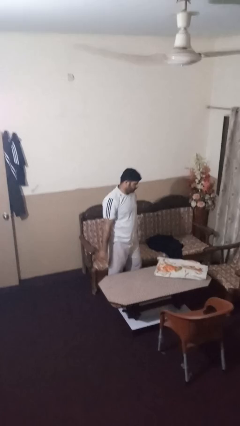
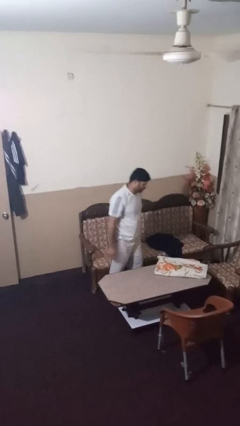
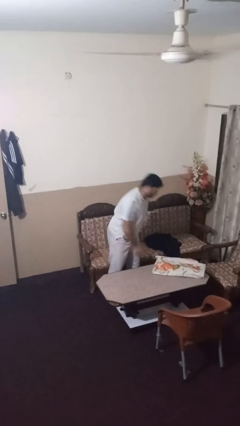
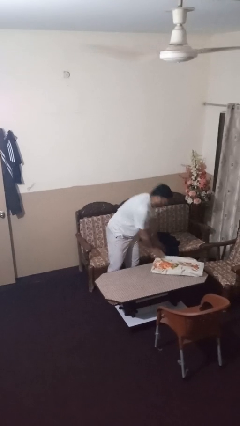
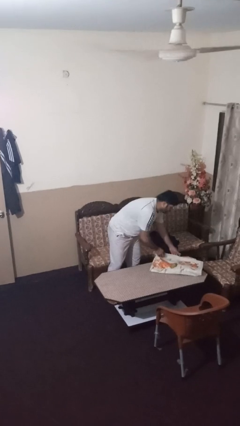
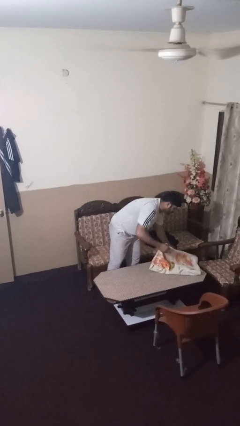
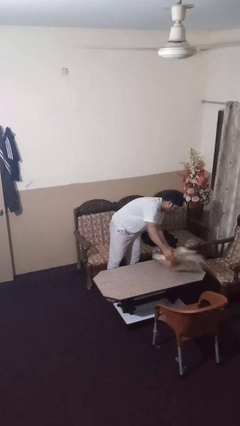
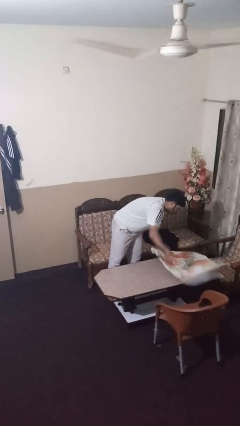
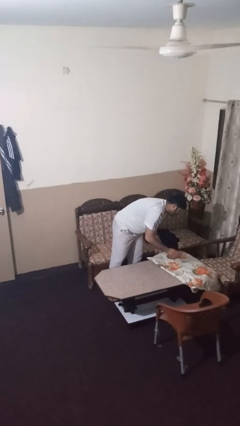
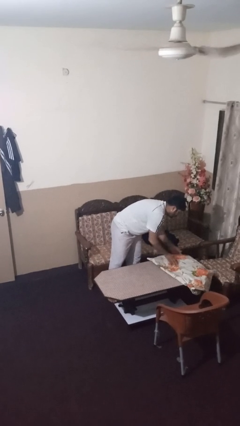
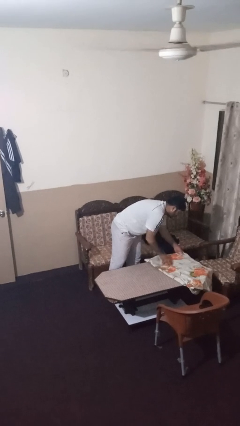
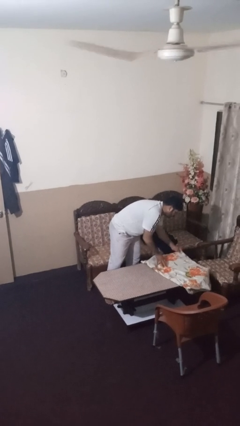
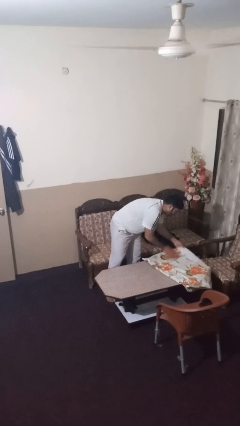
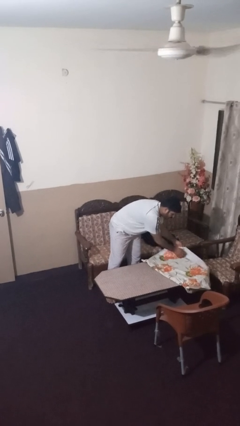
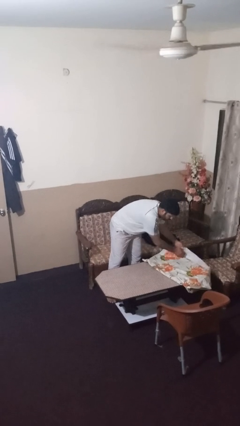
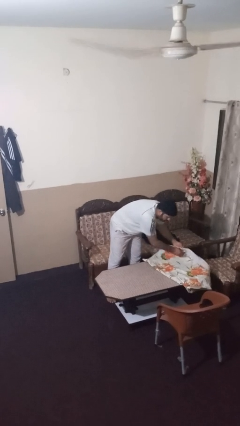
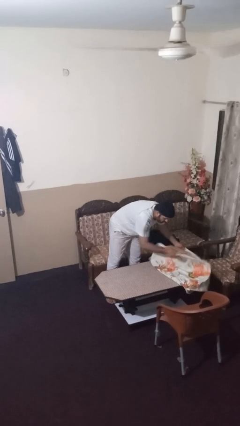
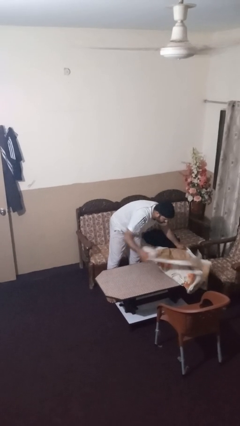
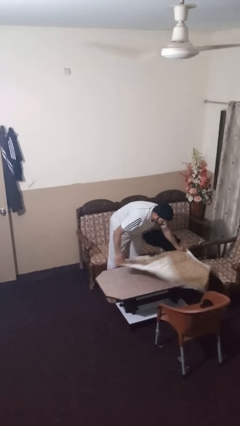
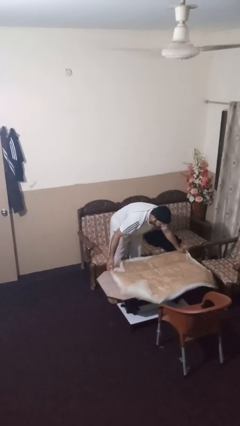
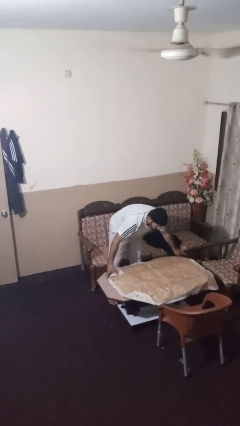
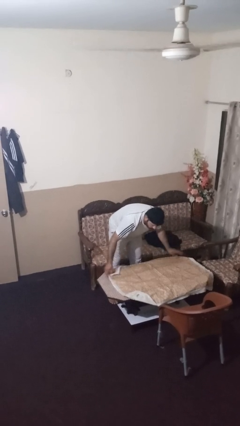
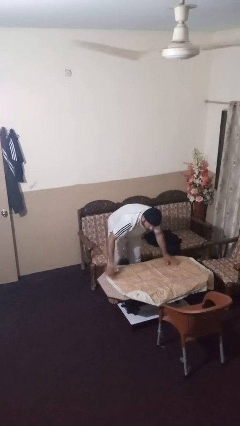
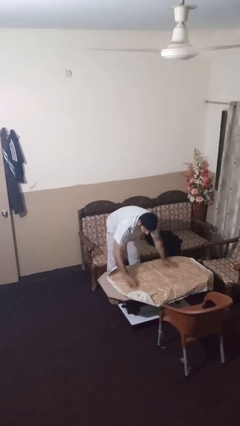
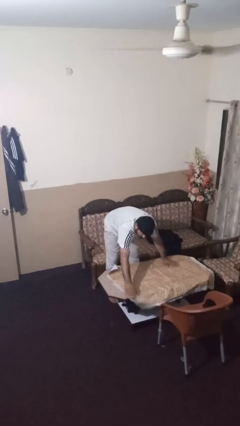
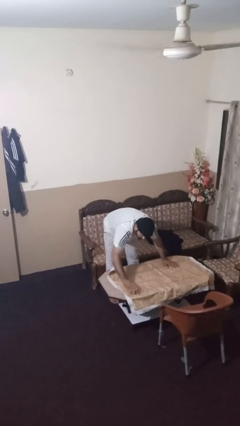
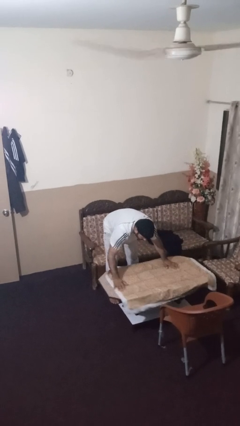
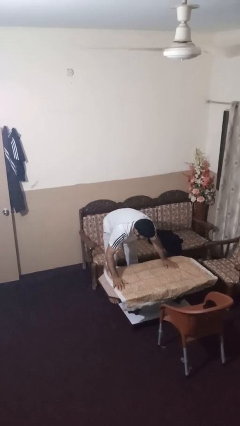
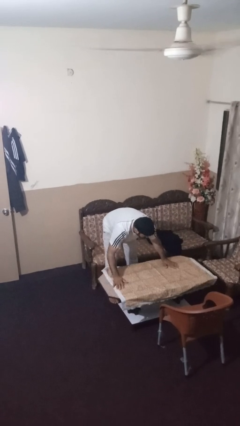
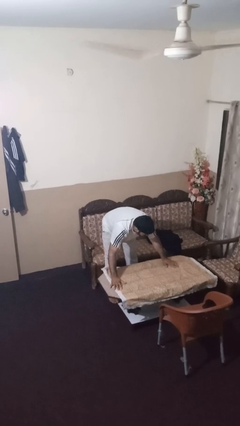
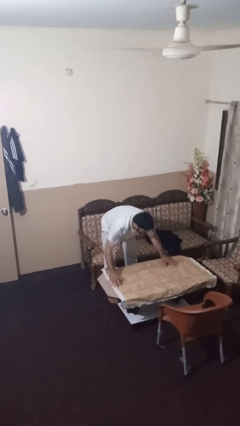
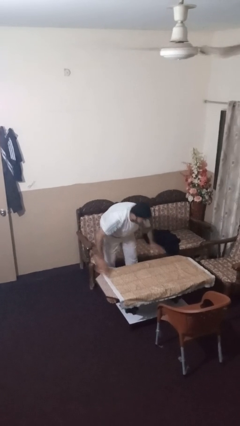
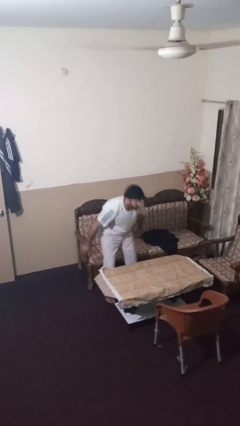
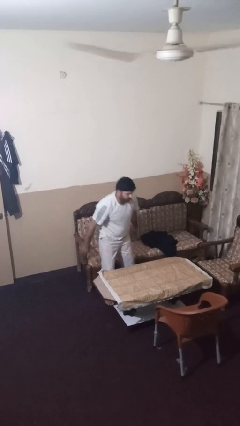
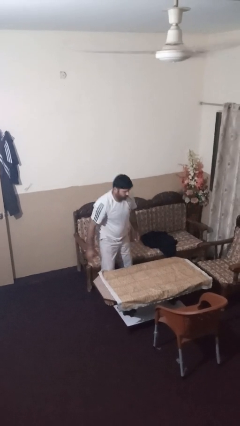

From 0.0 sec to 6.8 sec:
person spreads tablecloth

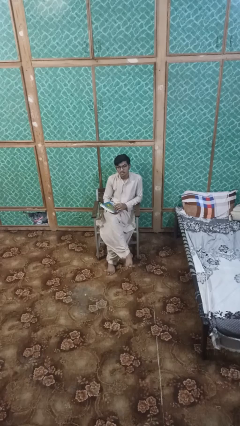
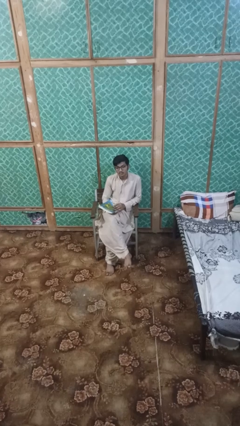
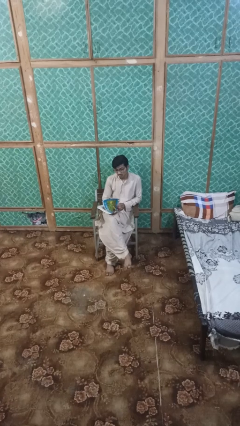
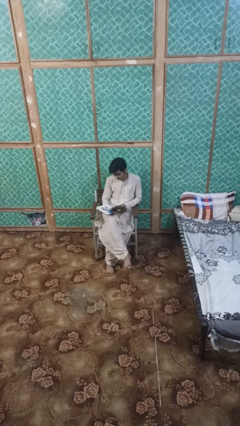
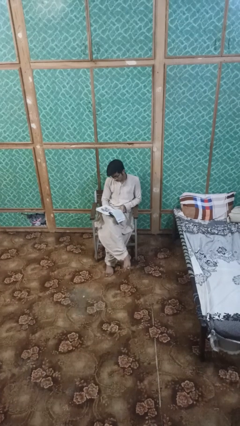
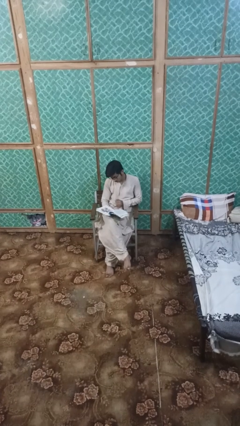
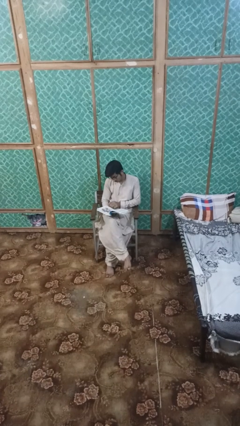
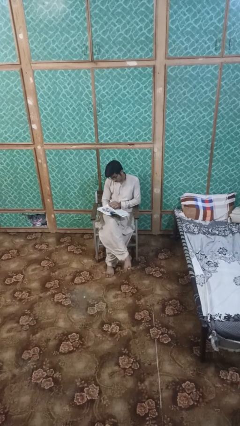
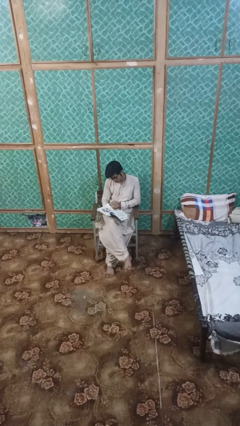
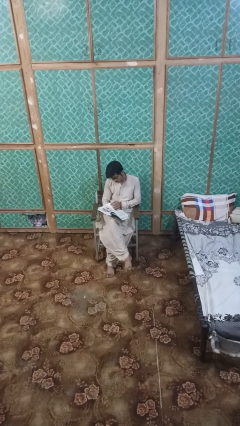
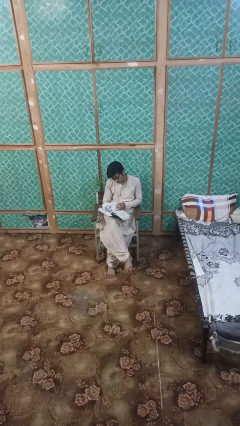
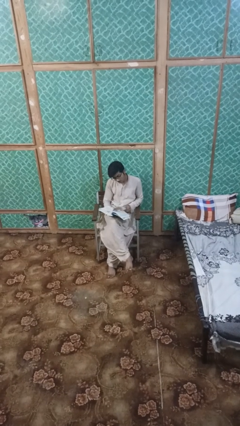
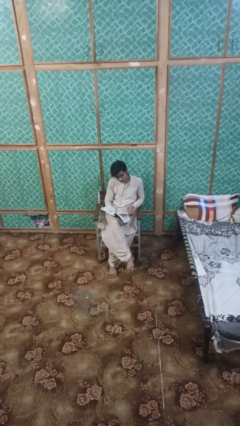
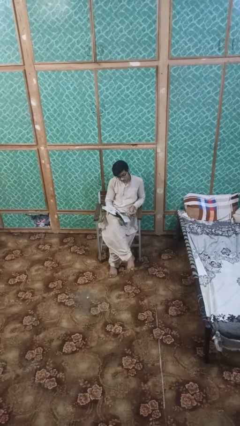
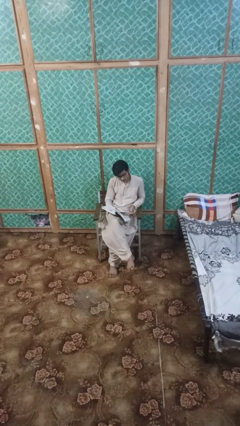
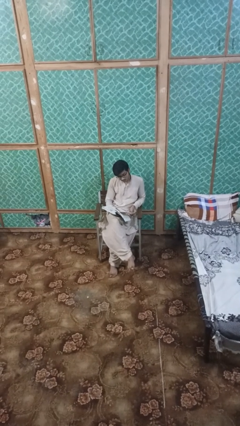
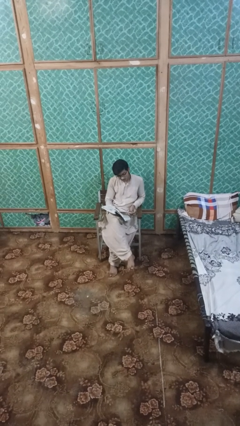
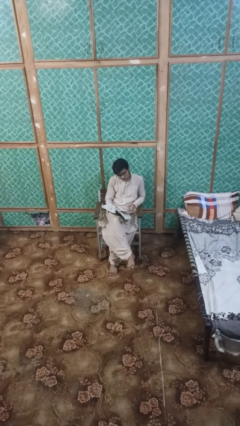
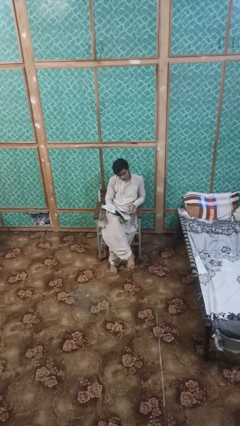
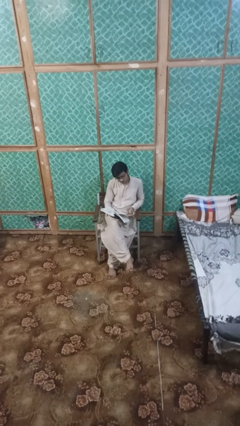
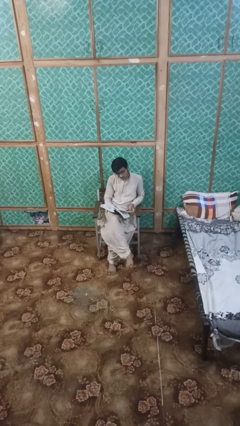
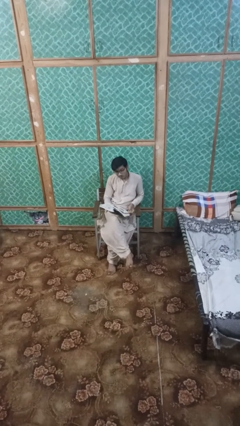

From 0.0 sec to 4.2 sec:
person reads book

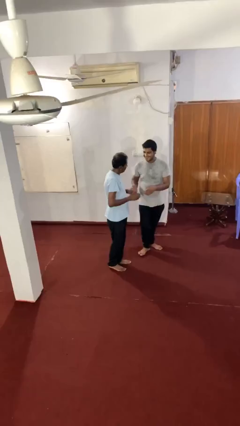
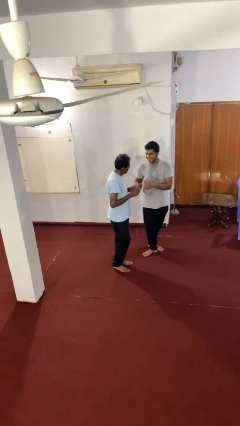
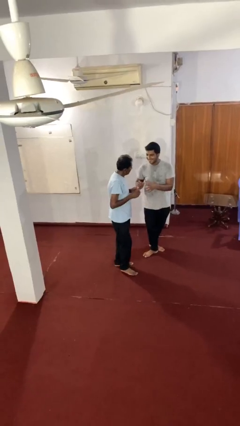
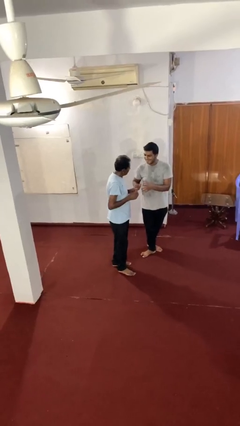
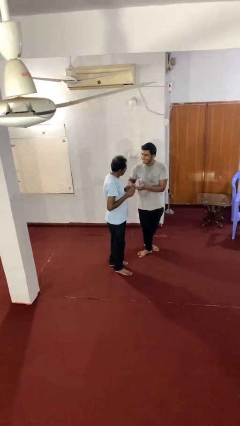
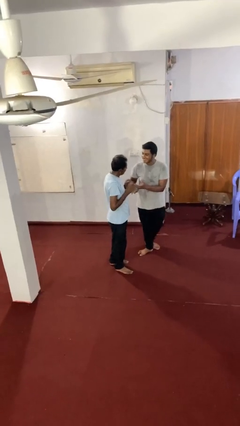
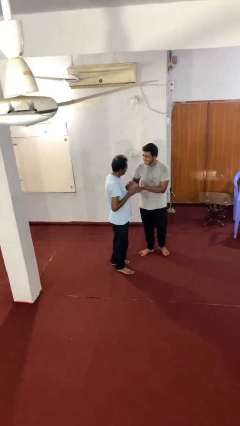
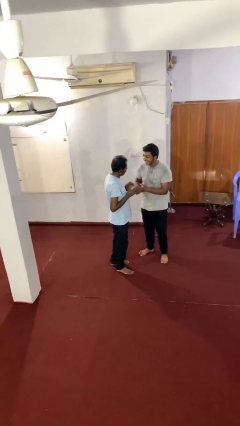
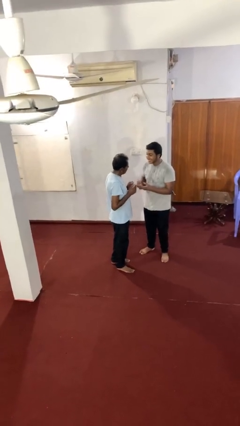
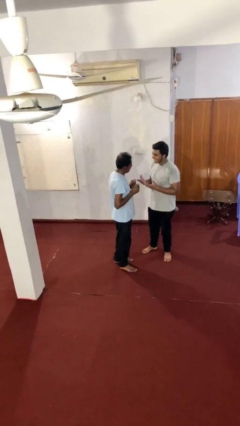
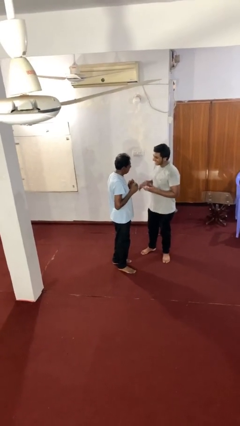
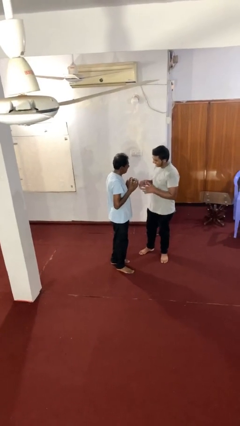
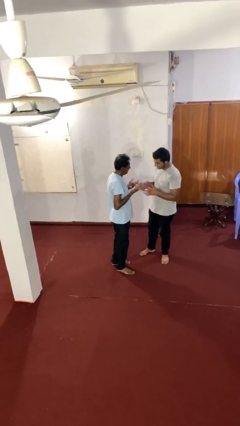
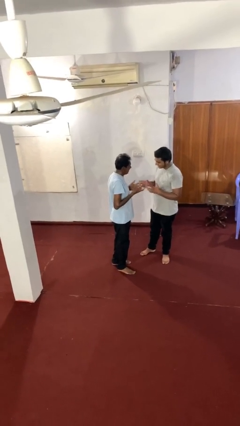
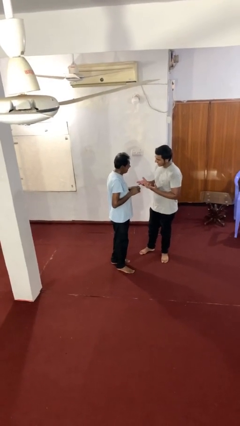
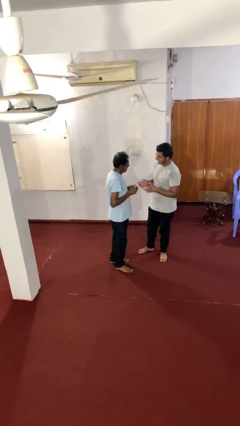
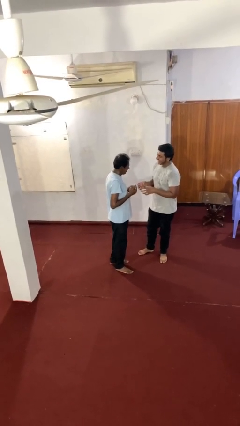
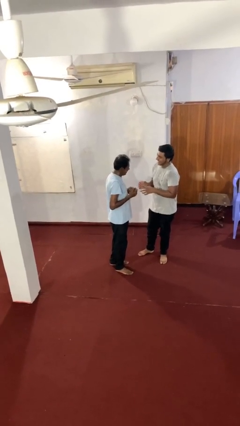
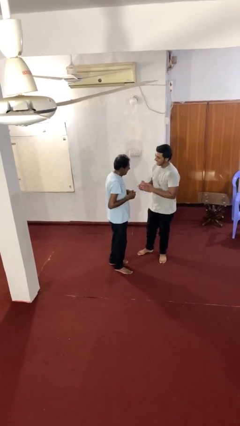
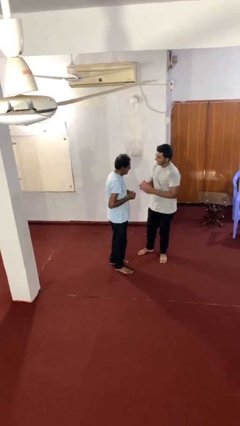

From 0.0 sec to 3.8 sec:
person talks to person

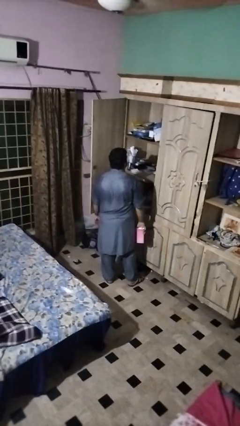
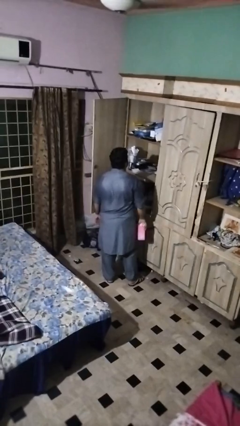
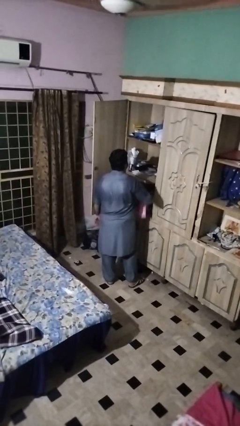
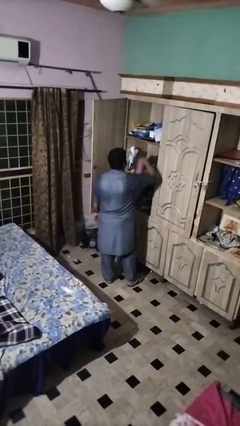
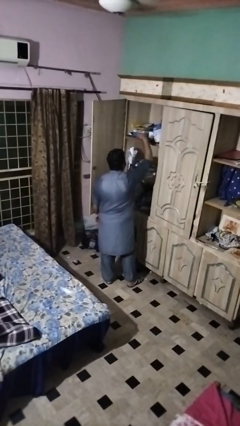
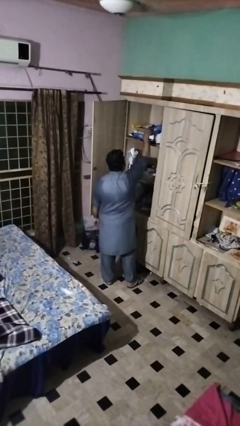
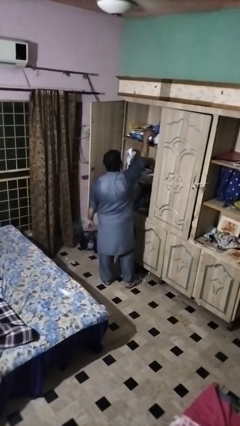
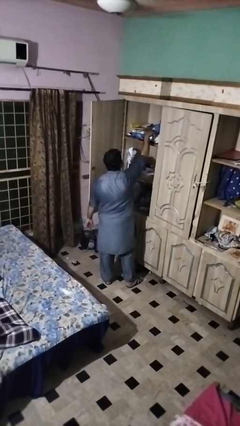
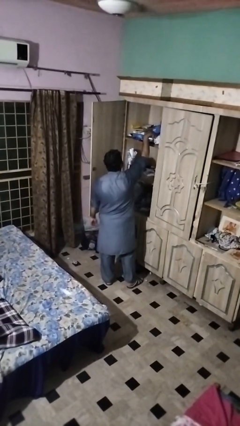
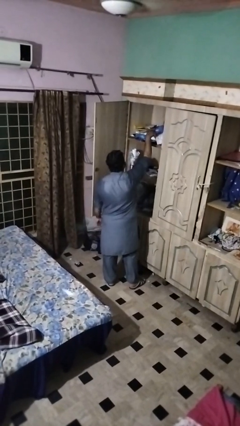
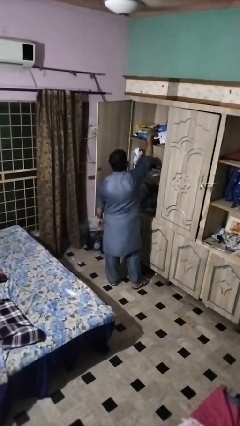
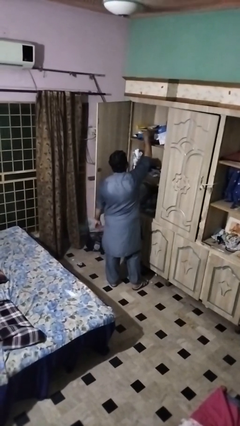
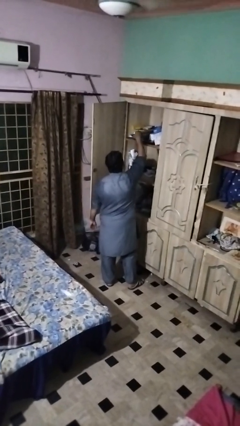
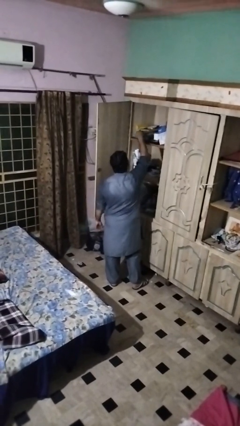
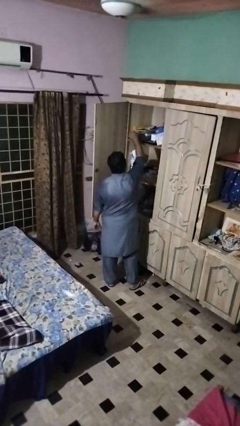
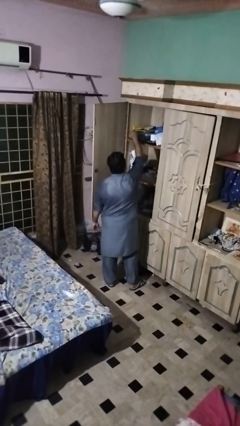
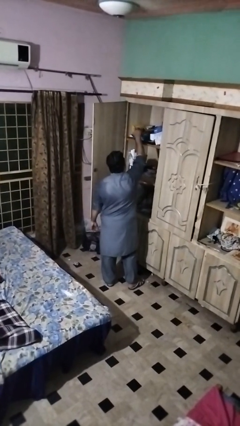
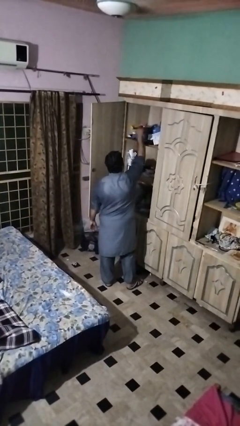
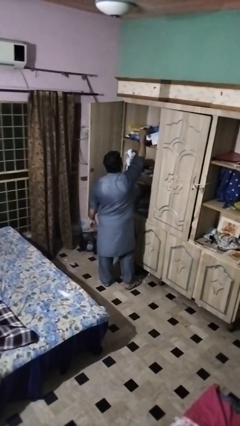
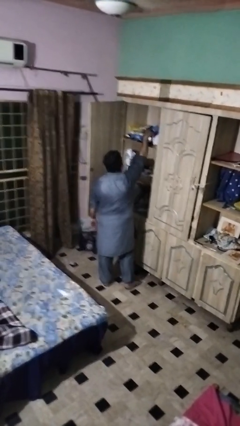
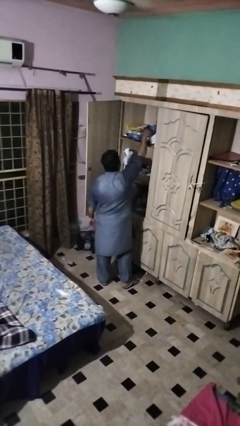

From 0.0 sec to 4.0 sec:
person dusts furniture
